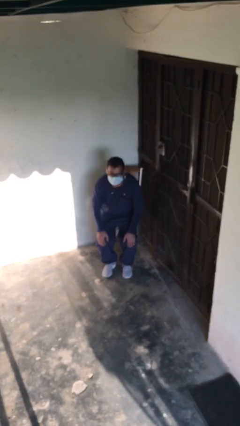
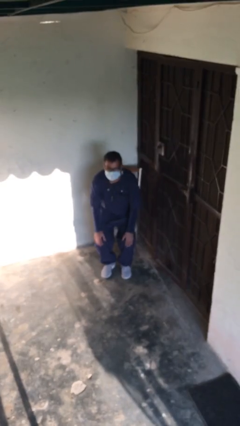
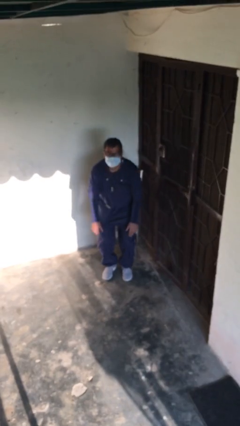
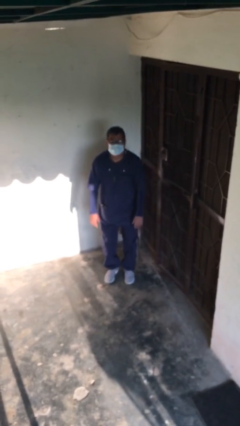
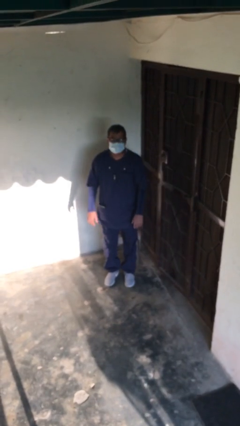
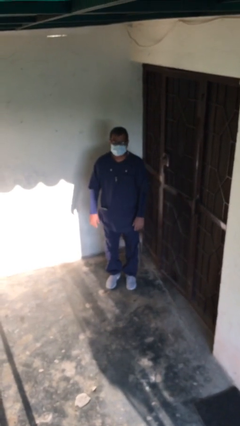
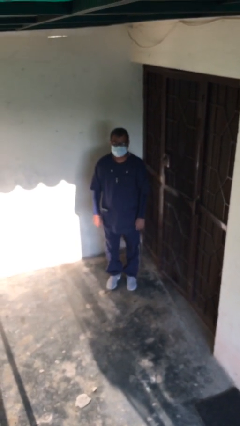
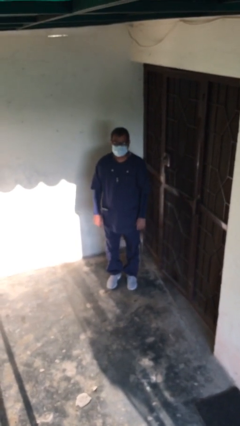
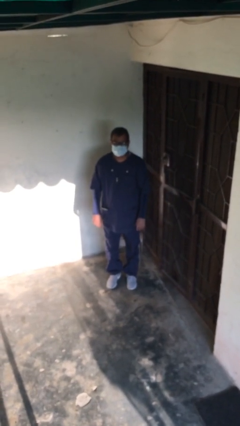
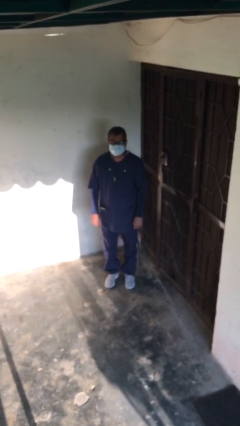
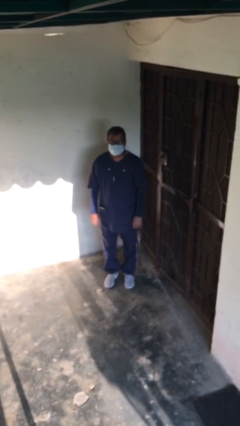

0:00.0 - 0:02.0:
person stands up

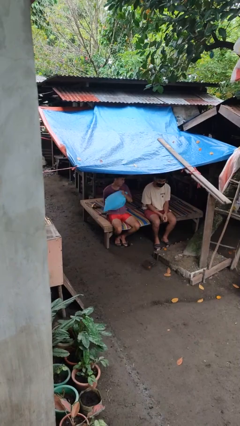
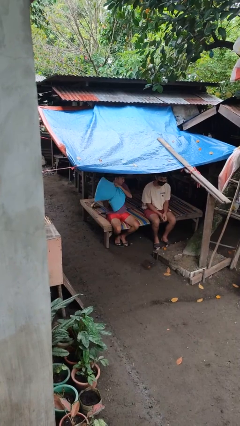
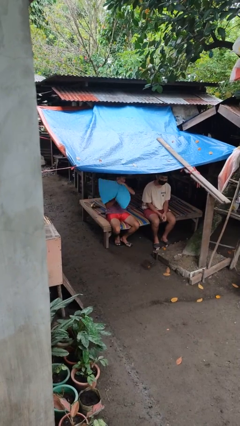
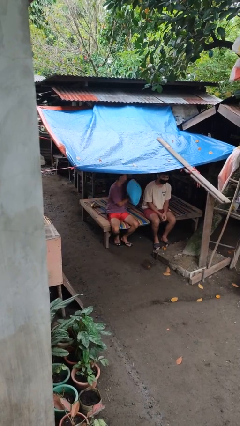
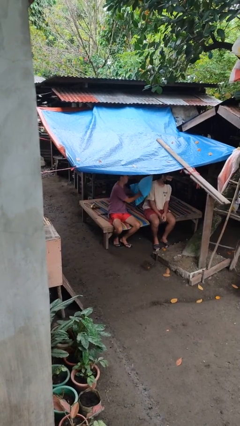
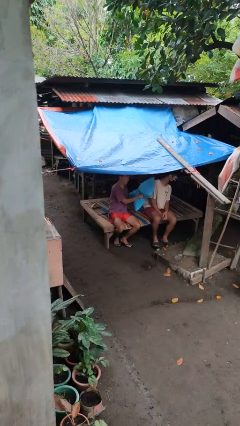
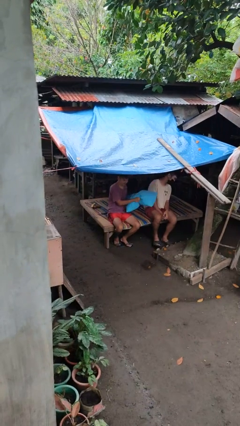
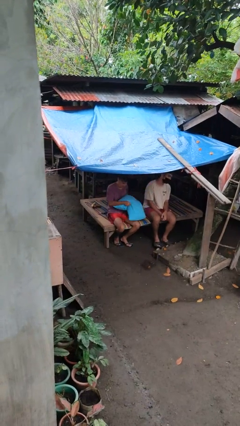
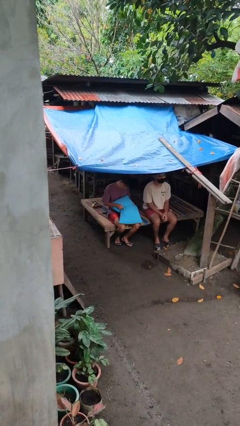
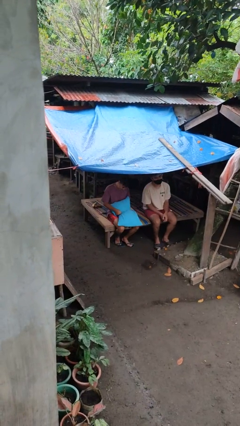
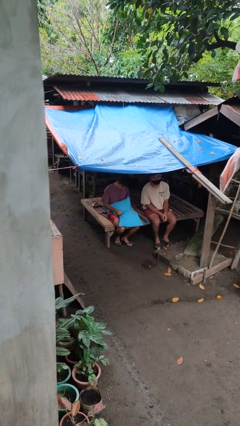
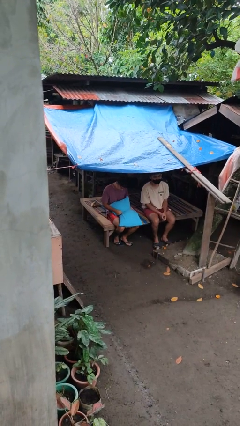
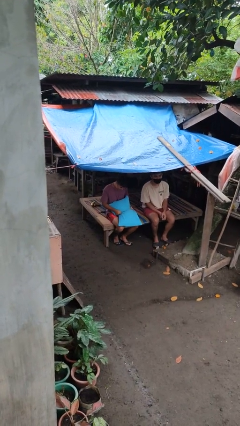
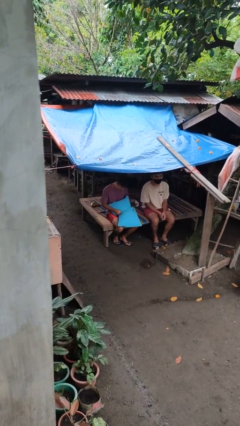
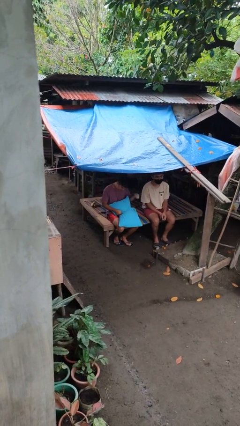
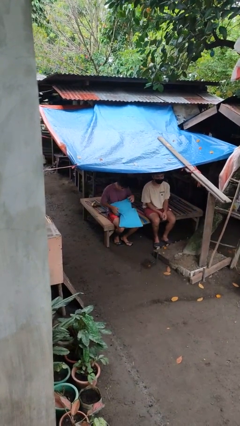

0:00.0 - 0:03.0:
person hits person with pillow

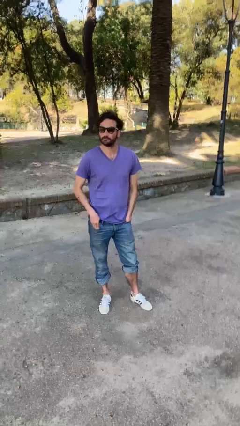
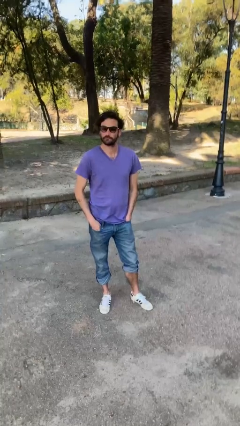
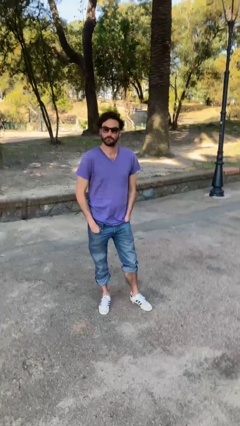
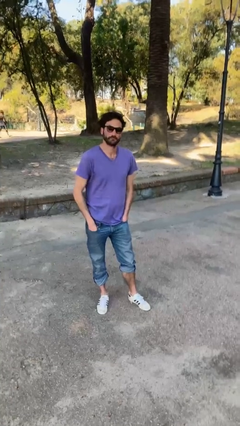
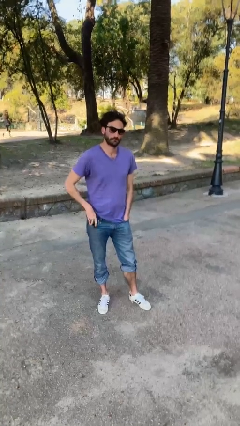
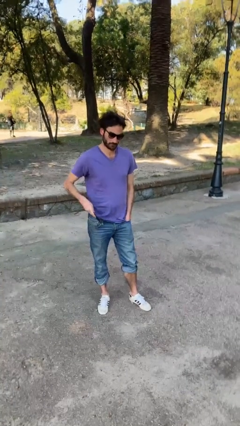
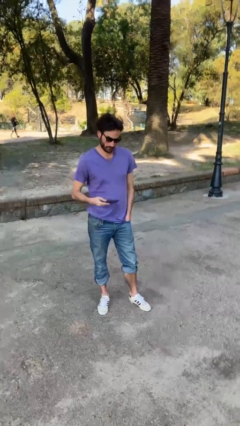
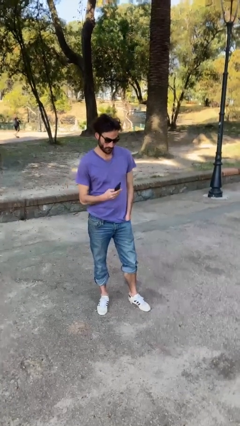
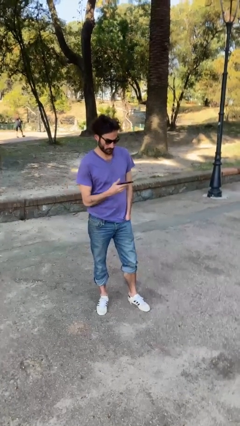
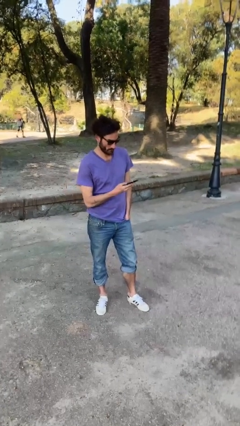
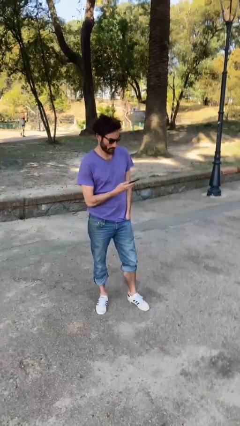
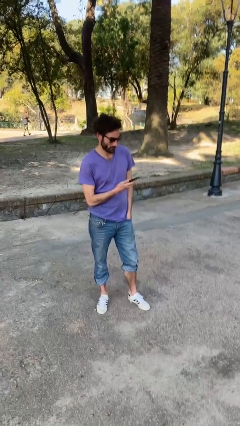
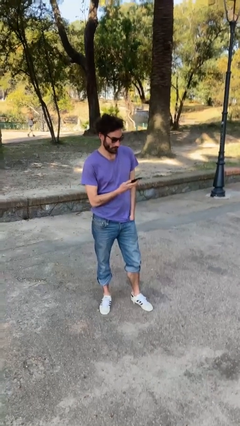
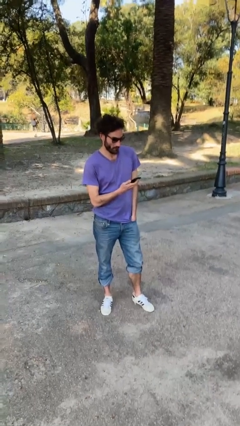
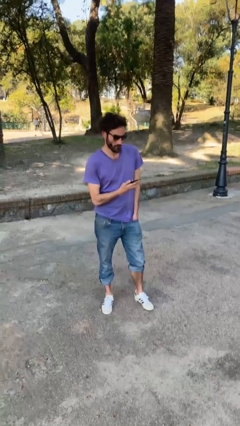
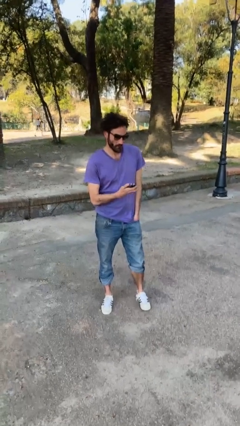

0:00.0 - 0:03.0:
person takes phone from pocket

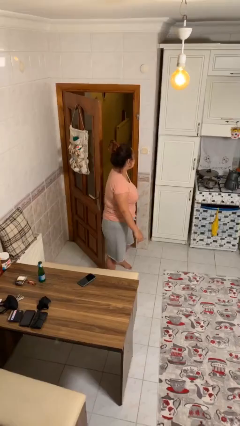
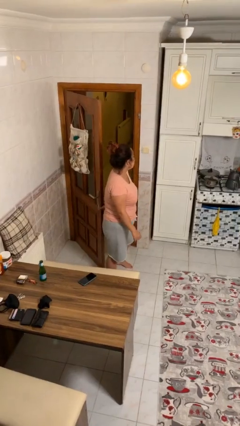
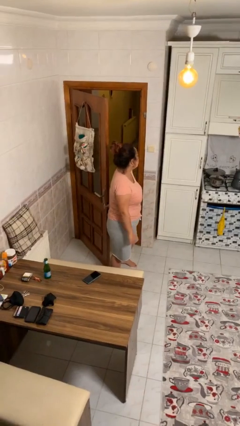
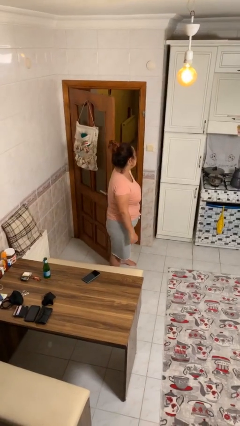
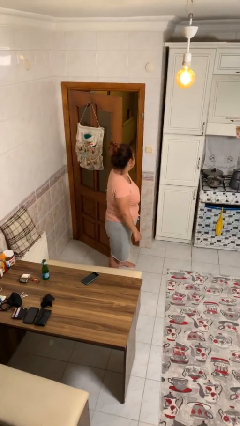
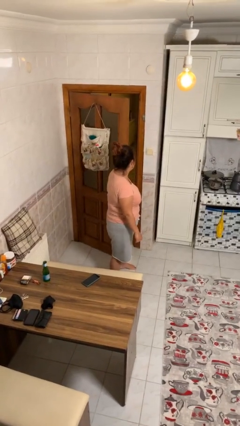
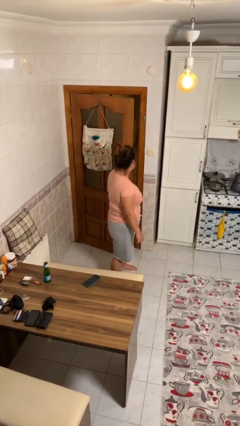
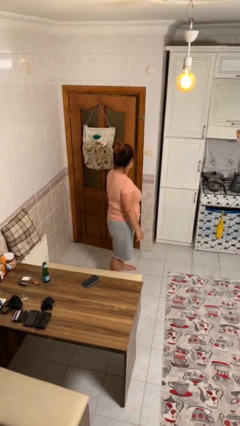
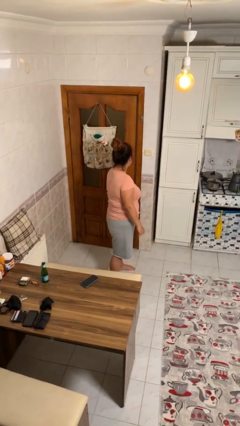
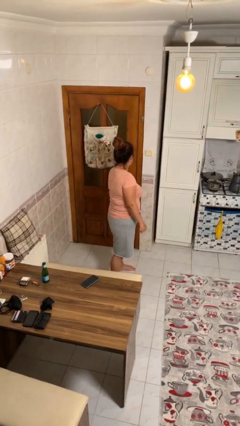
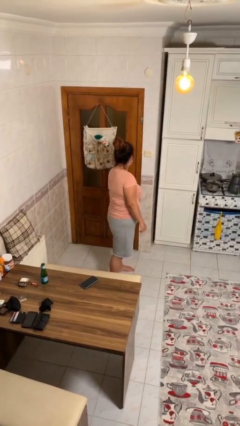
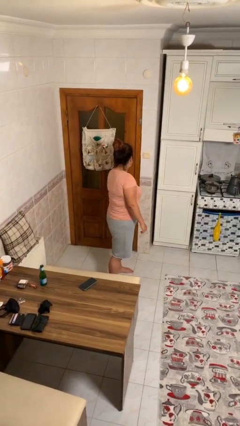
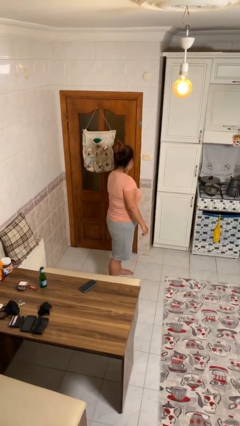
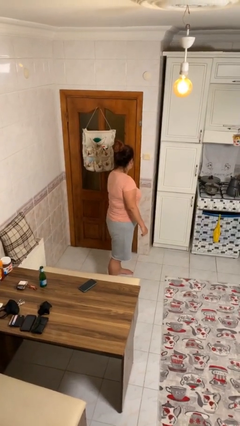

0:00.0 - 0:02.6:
person closes facility door

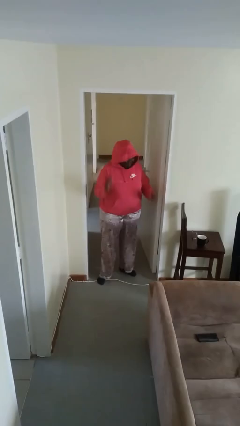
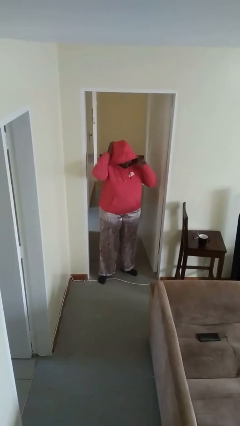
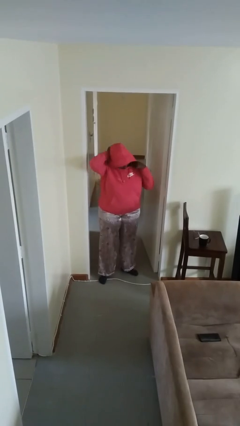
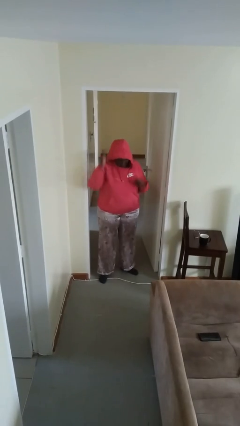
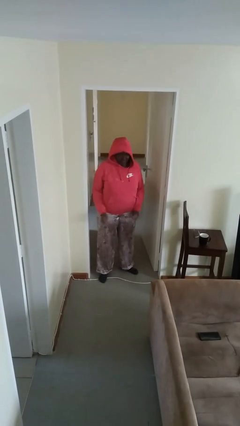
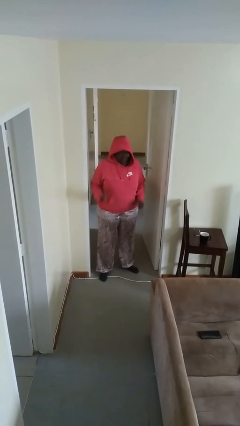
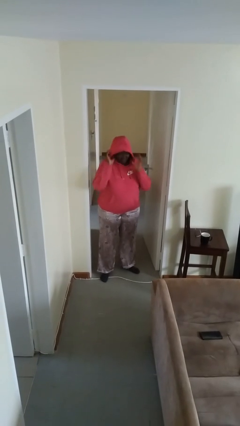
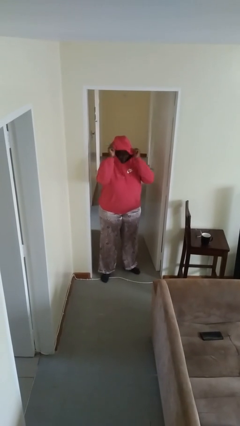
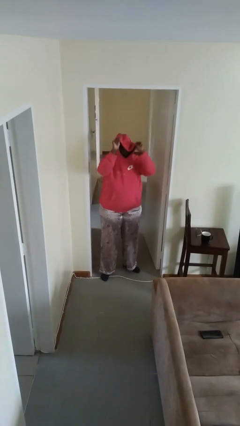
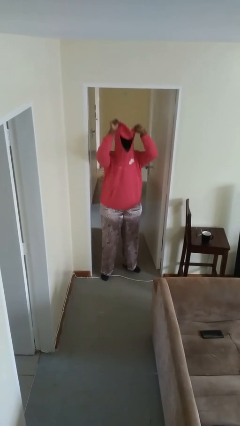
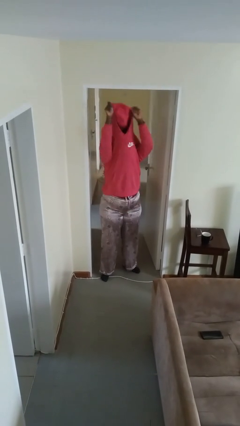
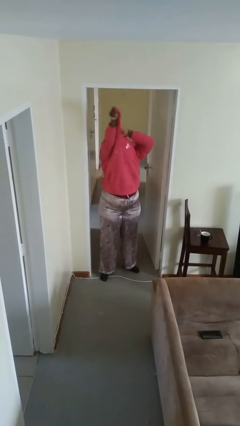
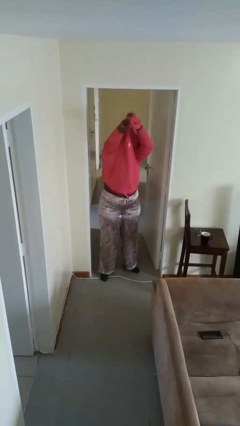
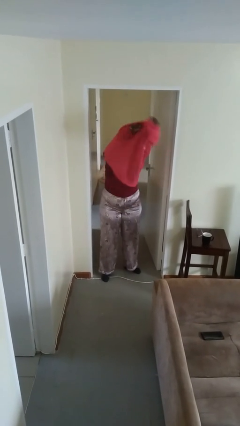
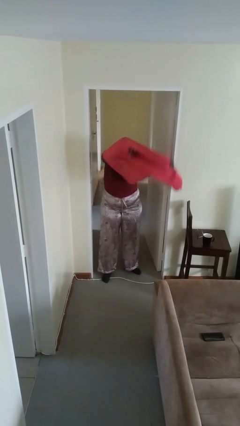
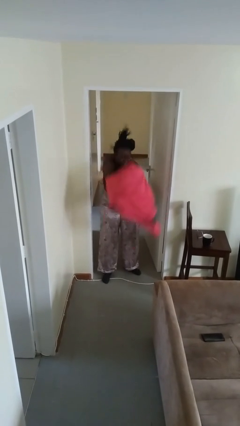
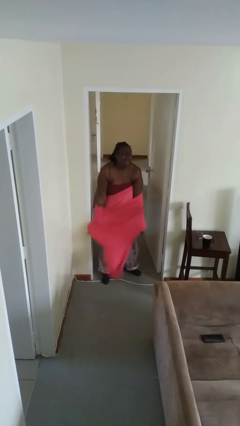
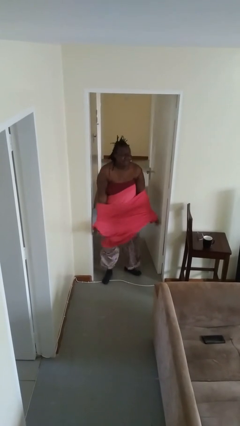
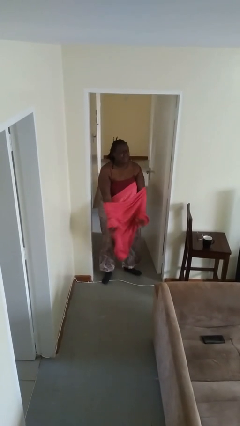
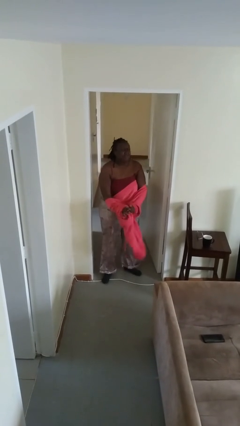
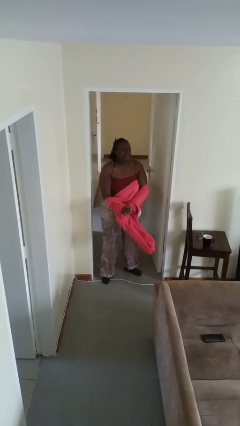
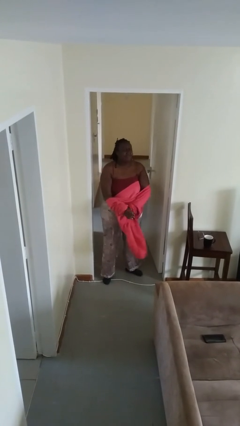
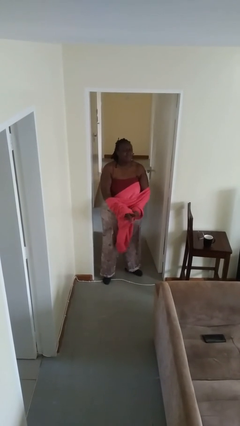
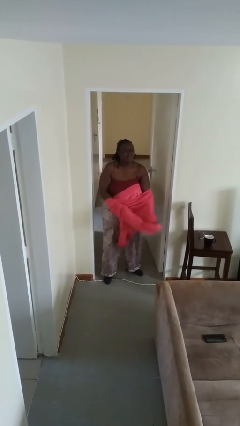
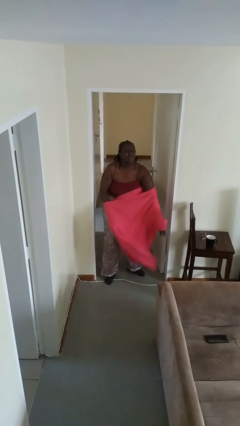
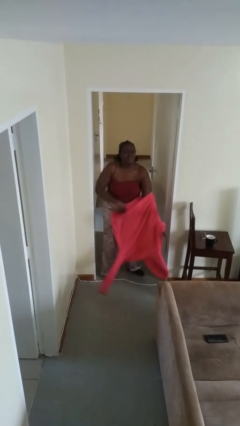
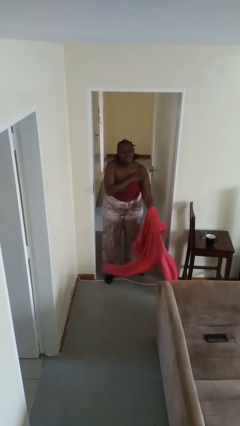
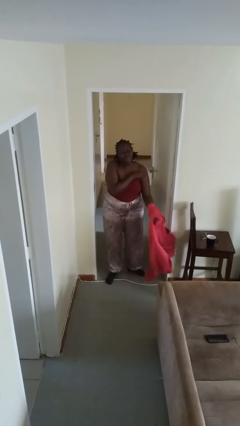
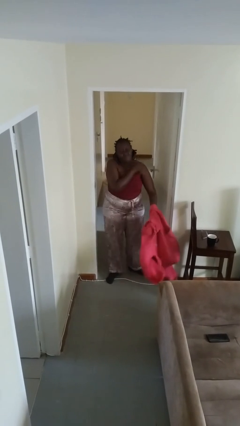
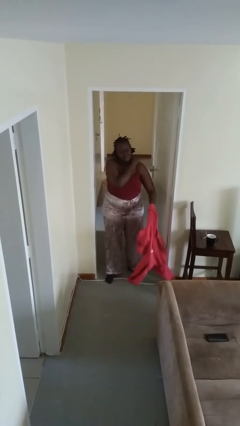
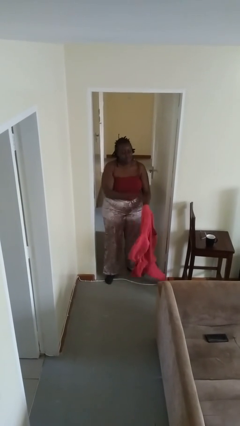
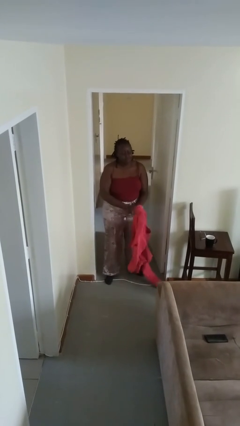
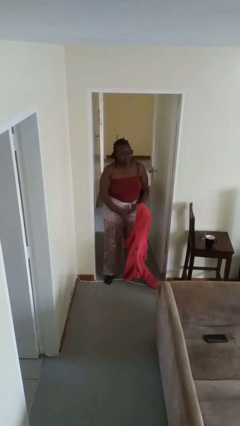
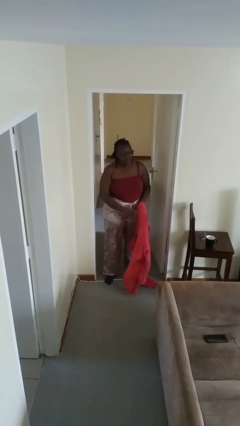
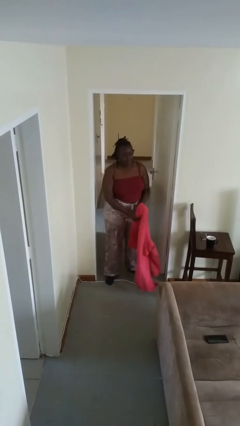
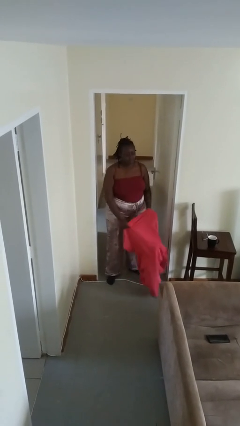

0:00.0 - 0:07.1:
person takes off hoodie

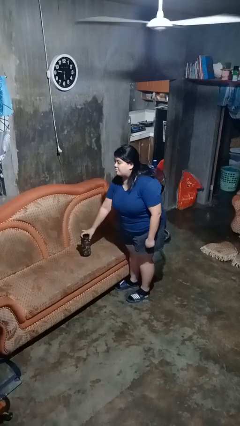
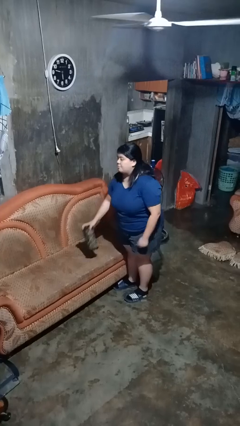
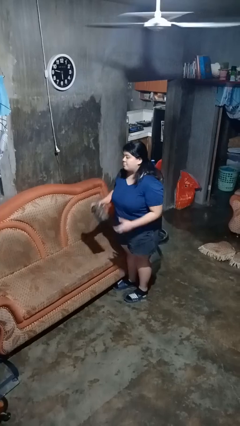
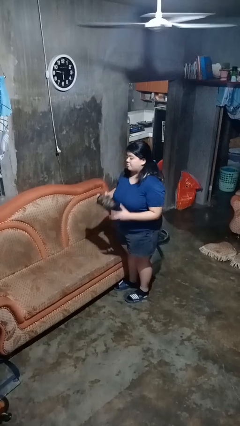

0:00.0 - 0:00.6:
person picks up object from couch
